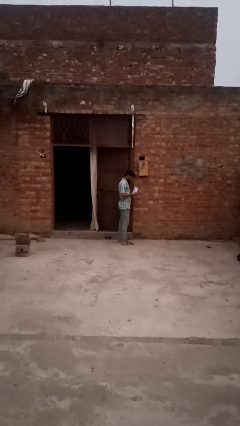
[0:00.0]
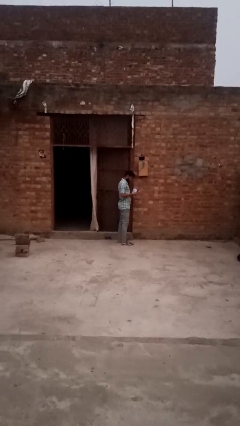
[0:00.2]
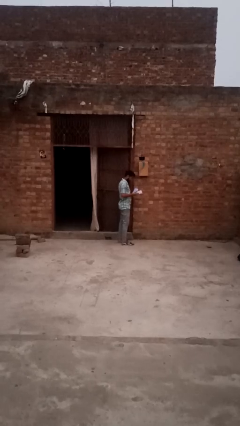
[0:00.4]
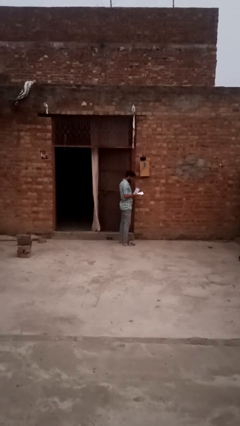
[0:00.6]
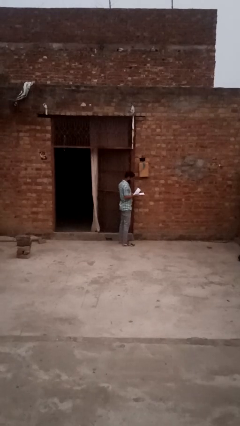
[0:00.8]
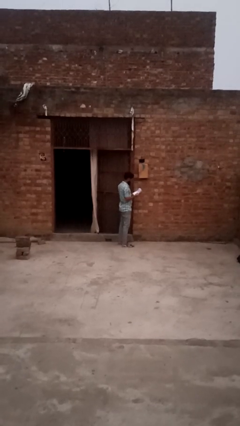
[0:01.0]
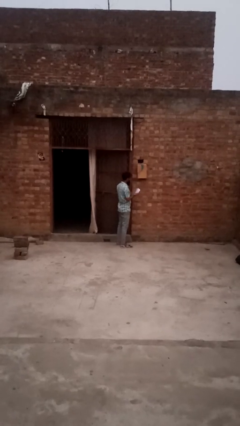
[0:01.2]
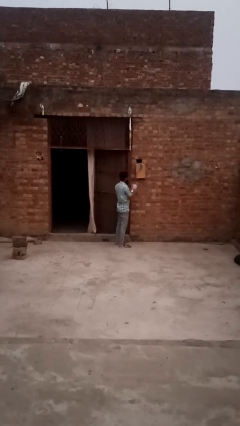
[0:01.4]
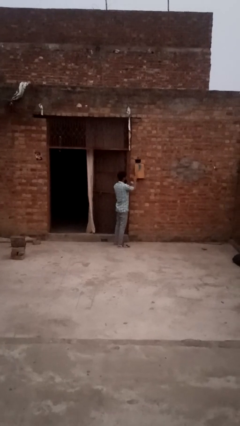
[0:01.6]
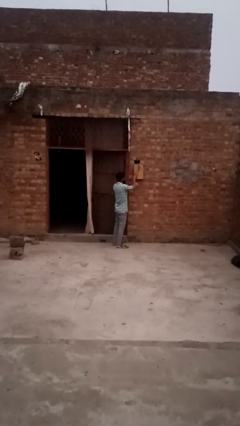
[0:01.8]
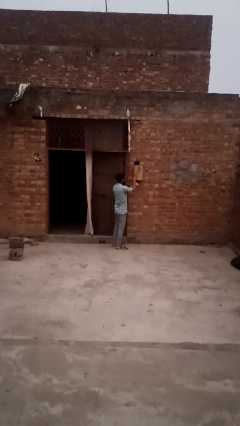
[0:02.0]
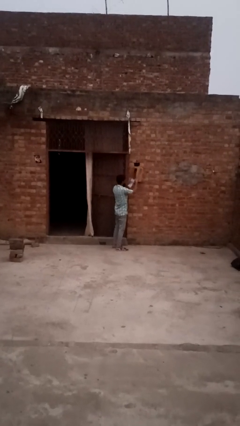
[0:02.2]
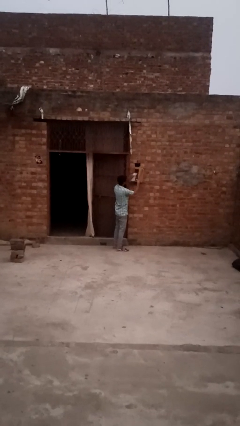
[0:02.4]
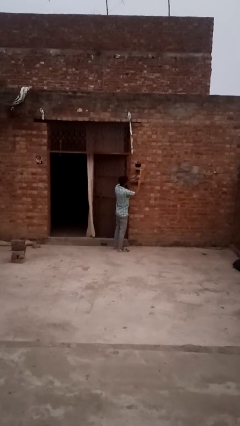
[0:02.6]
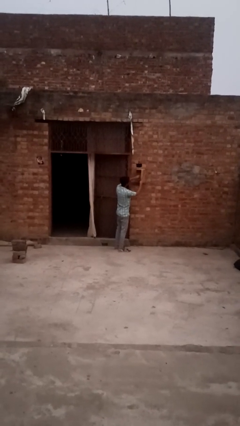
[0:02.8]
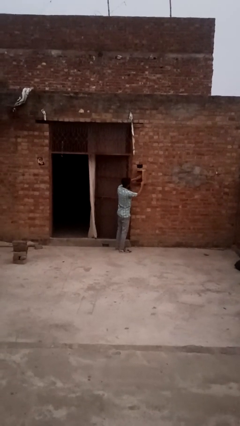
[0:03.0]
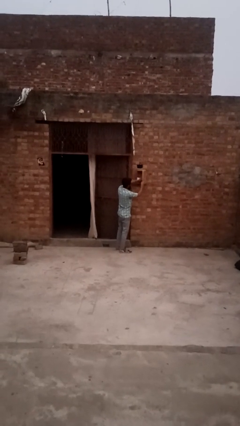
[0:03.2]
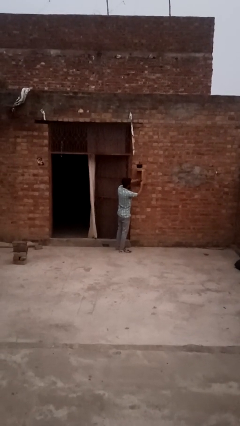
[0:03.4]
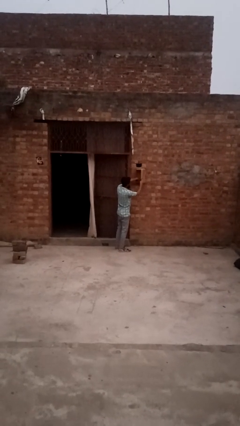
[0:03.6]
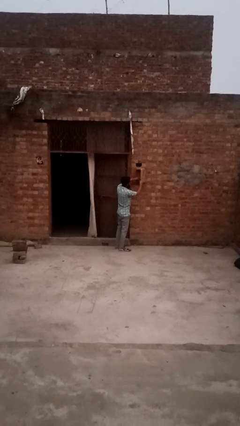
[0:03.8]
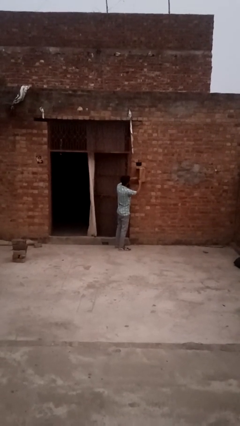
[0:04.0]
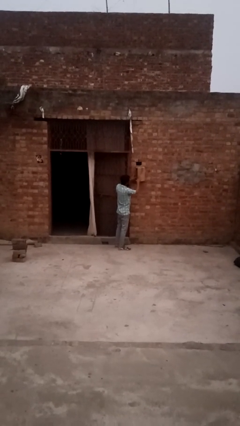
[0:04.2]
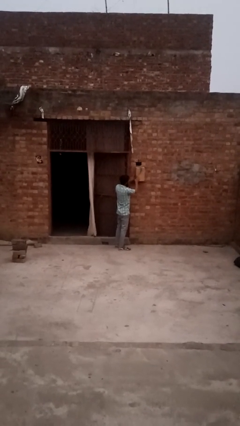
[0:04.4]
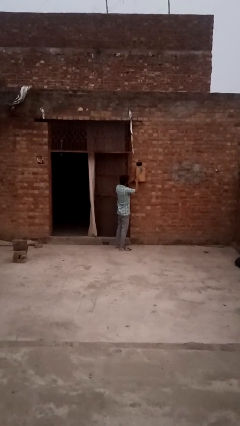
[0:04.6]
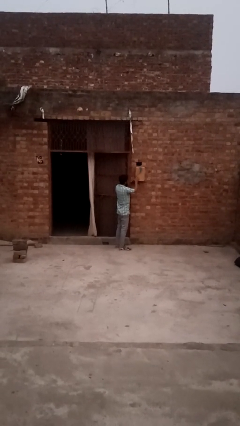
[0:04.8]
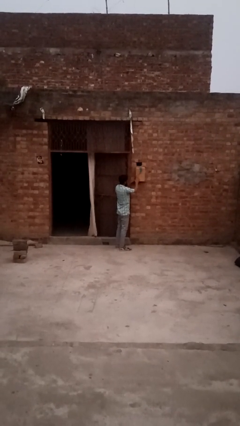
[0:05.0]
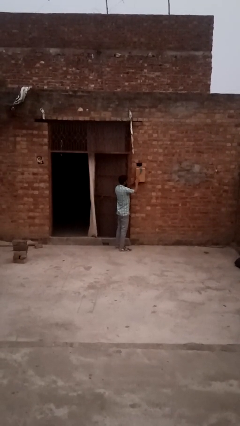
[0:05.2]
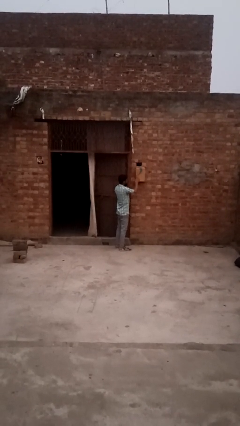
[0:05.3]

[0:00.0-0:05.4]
person takes letters from mailbox

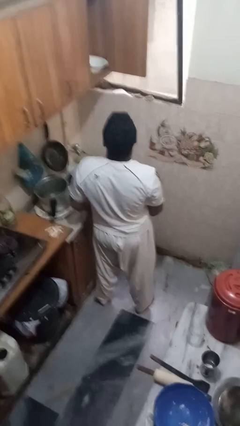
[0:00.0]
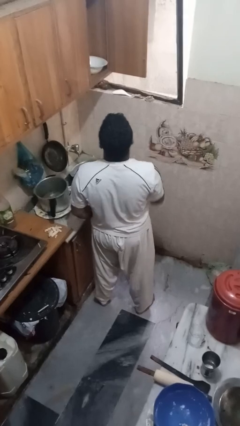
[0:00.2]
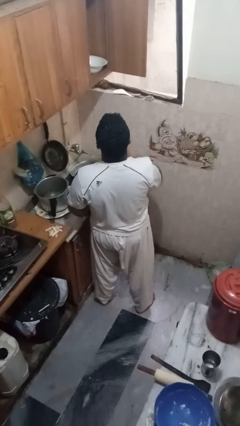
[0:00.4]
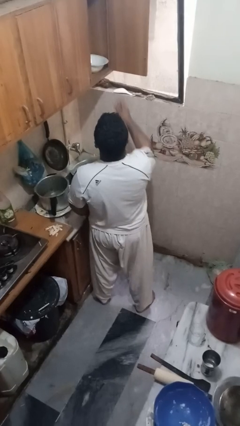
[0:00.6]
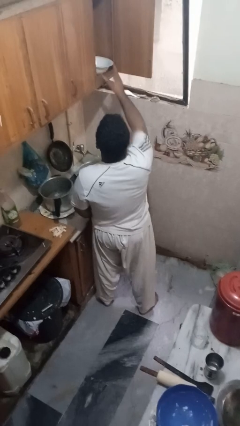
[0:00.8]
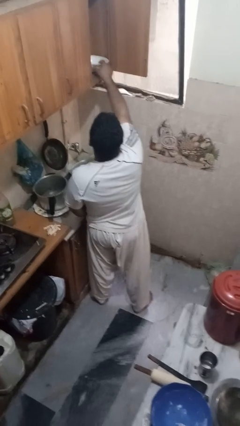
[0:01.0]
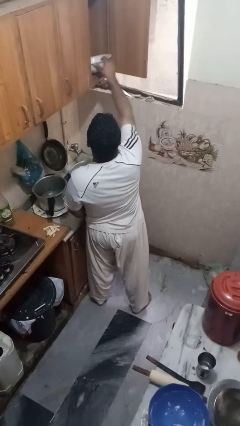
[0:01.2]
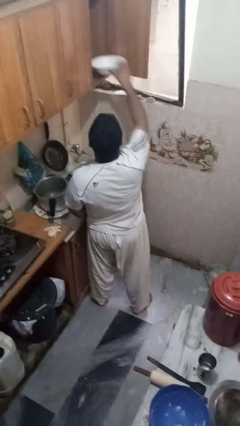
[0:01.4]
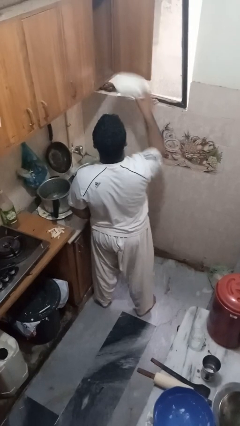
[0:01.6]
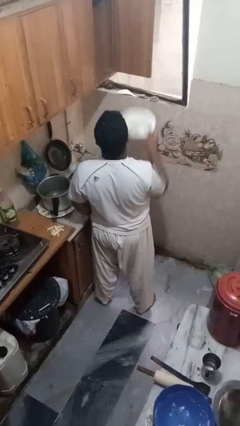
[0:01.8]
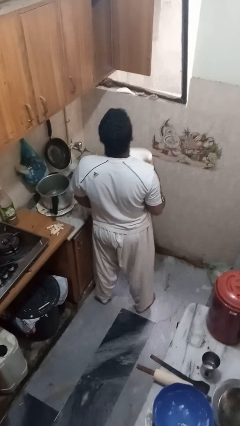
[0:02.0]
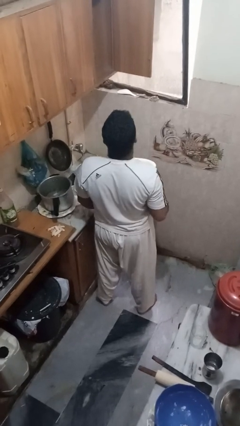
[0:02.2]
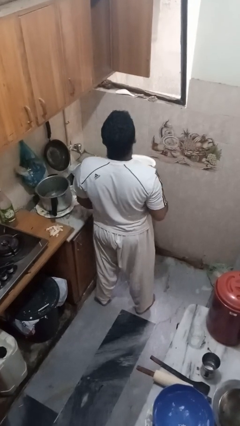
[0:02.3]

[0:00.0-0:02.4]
person takes object from cabinet

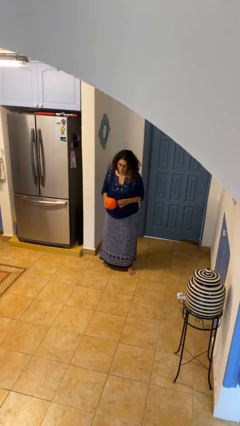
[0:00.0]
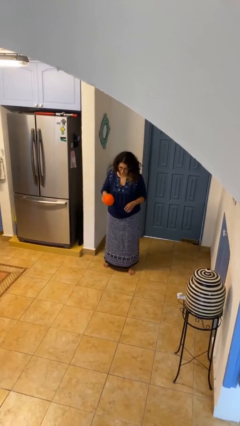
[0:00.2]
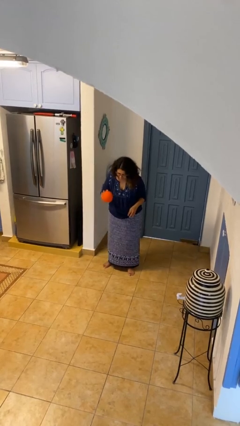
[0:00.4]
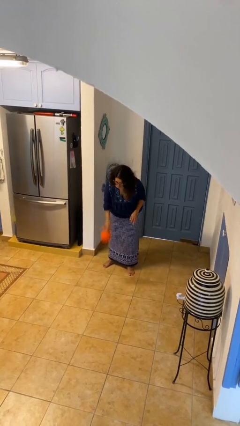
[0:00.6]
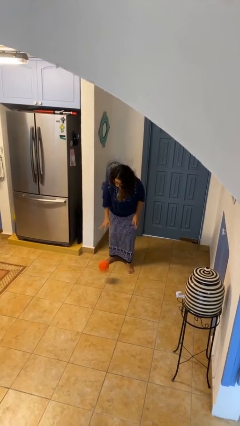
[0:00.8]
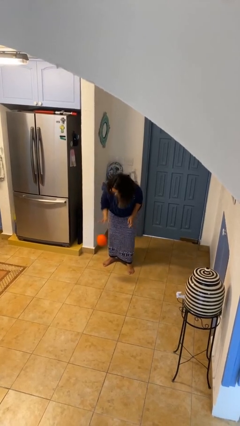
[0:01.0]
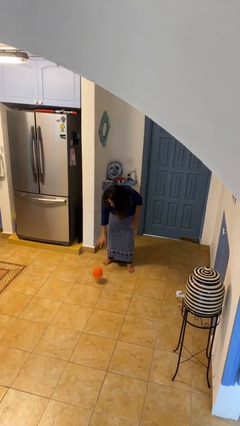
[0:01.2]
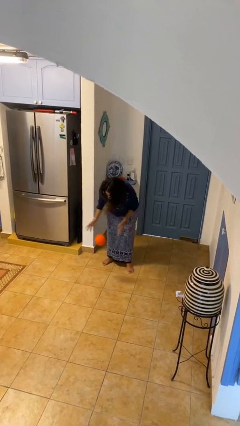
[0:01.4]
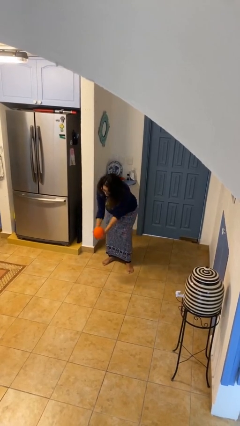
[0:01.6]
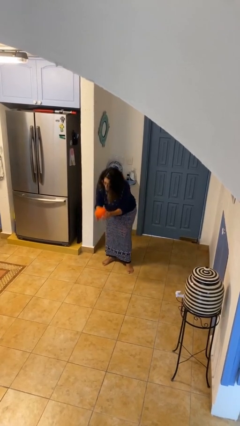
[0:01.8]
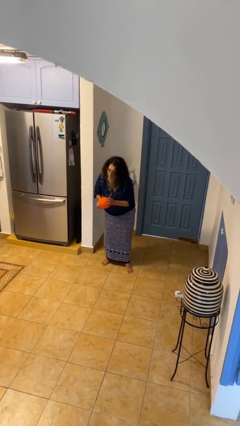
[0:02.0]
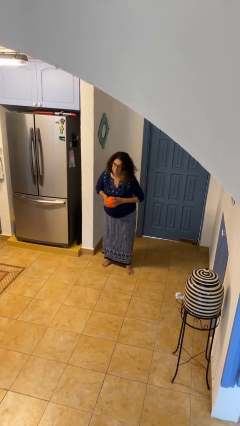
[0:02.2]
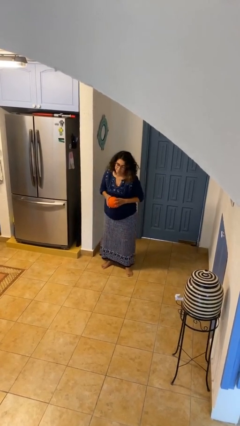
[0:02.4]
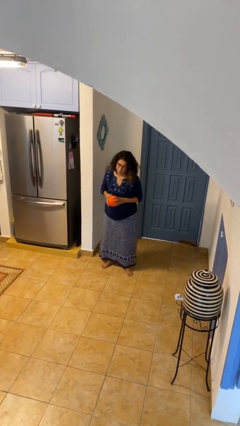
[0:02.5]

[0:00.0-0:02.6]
person bounces ball on floor

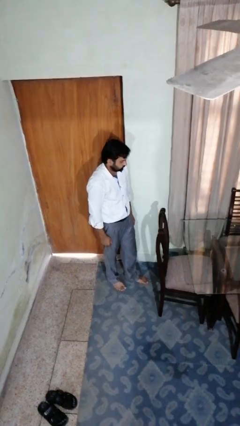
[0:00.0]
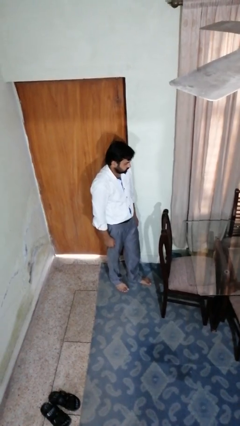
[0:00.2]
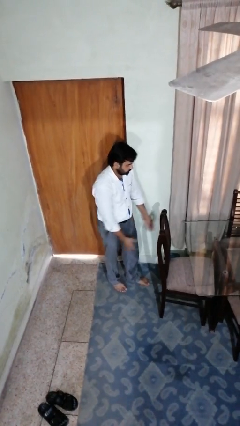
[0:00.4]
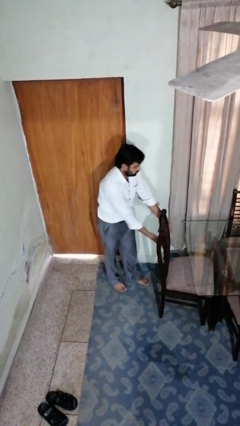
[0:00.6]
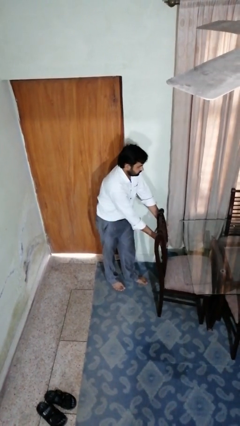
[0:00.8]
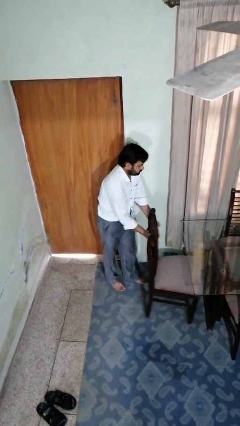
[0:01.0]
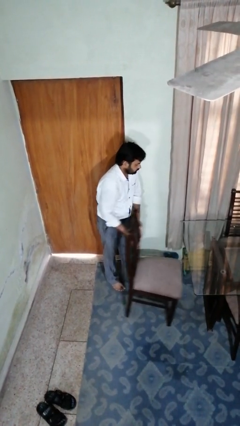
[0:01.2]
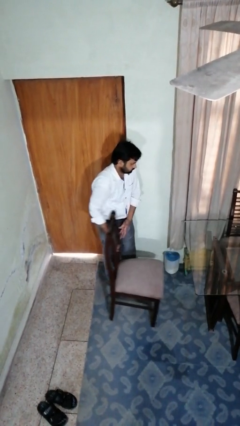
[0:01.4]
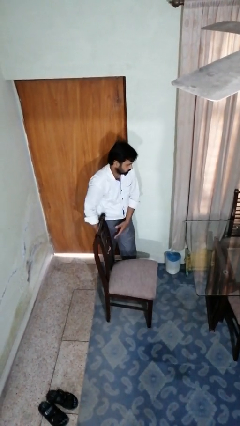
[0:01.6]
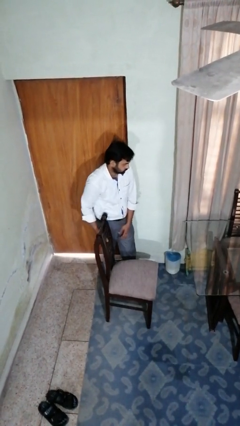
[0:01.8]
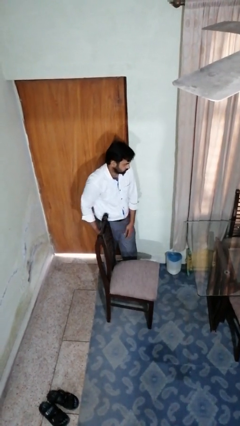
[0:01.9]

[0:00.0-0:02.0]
person pulls out chair

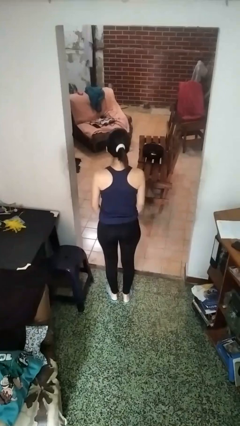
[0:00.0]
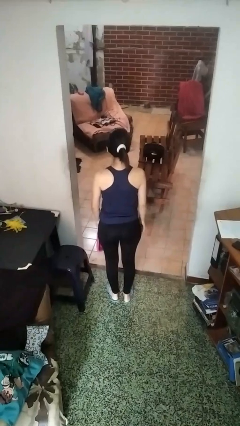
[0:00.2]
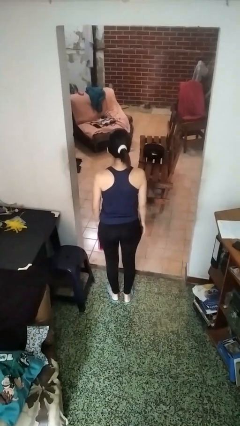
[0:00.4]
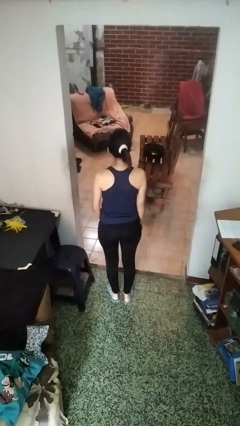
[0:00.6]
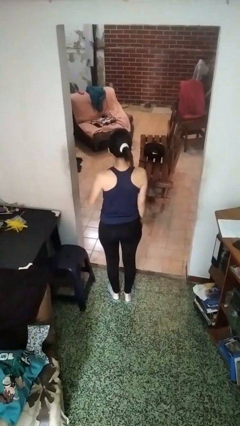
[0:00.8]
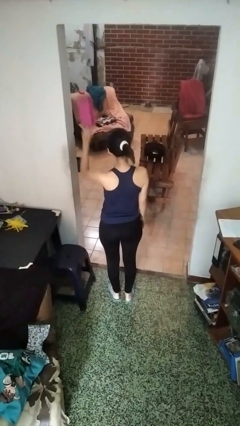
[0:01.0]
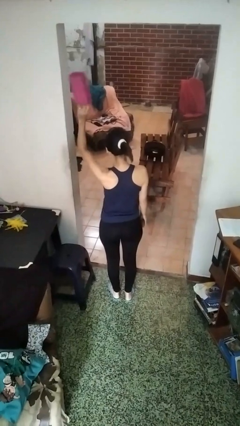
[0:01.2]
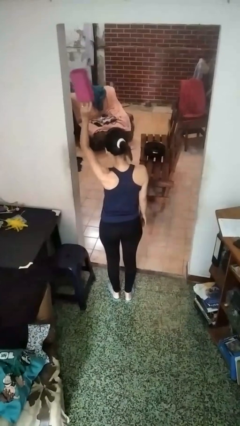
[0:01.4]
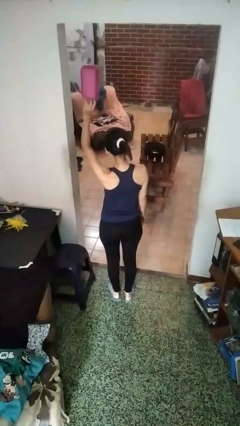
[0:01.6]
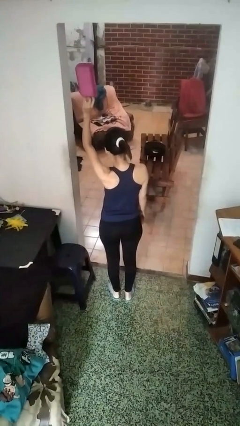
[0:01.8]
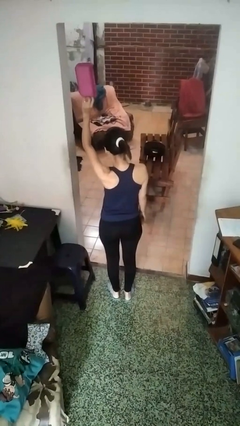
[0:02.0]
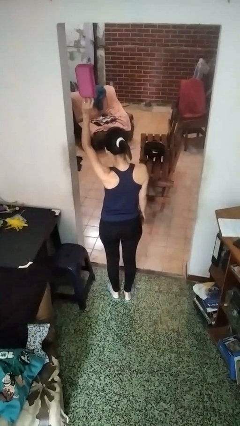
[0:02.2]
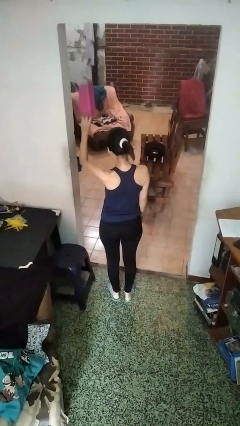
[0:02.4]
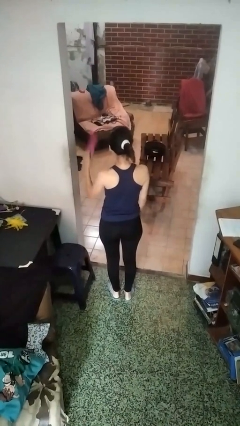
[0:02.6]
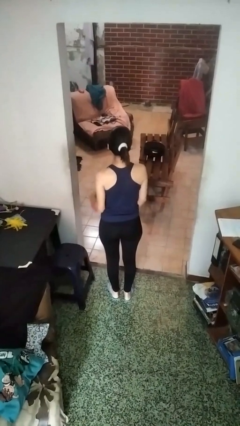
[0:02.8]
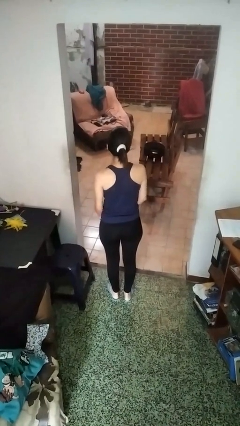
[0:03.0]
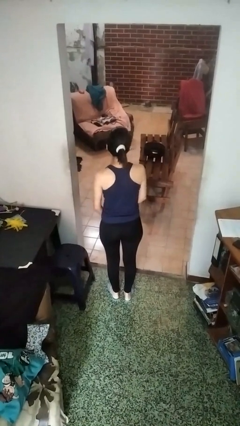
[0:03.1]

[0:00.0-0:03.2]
person holds object above head

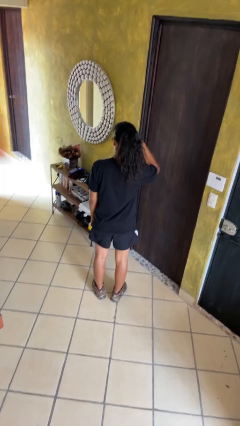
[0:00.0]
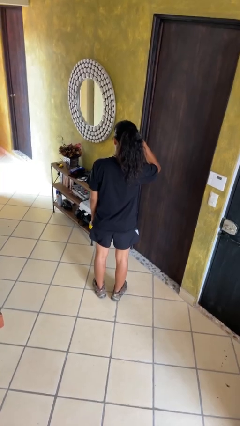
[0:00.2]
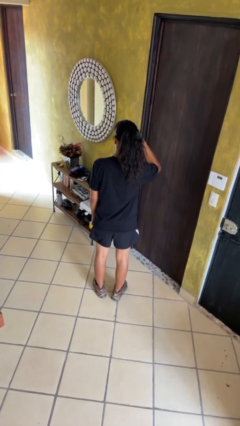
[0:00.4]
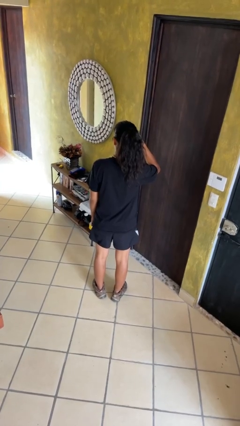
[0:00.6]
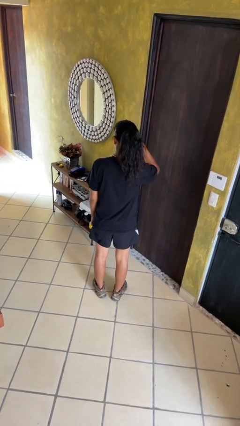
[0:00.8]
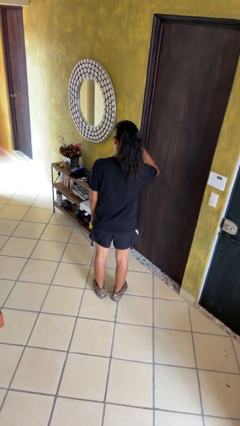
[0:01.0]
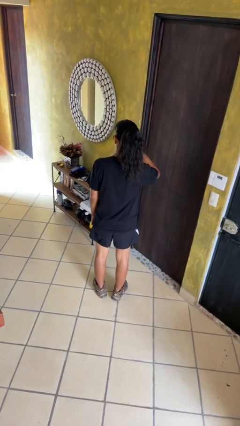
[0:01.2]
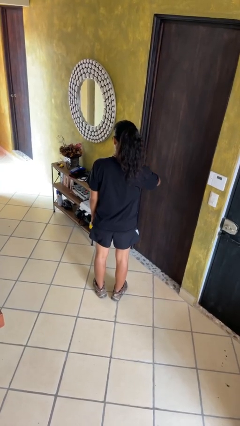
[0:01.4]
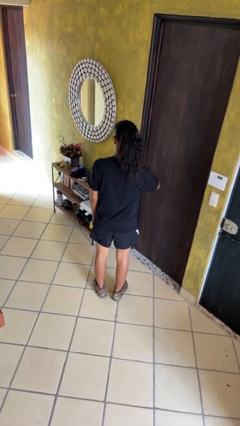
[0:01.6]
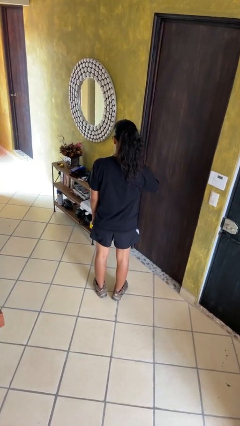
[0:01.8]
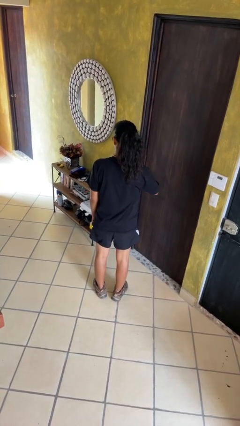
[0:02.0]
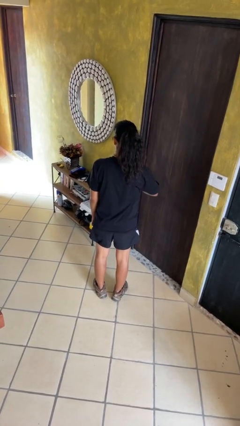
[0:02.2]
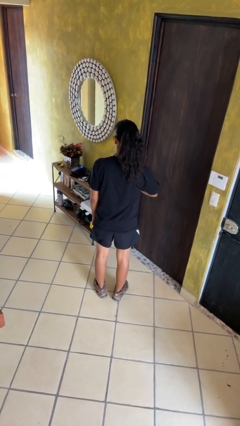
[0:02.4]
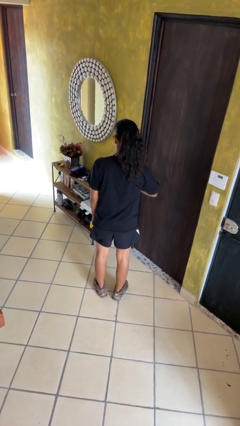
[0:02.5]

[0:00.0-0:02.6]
person gestures swipe down
